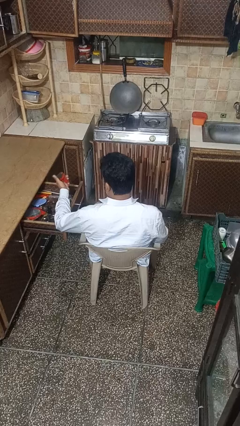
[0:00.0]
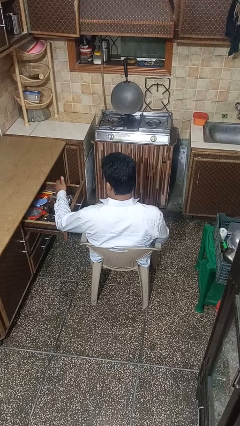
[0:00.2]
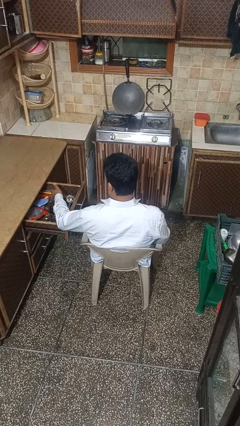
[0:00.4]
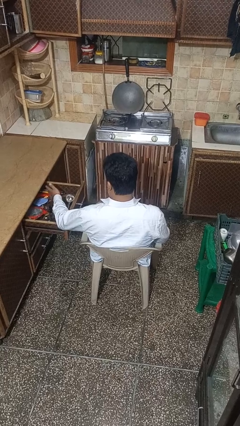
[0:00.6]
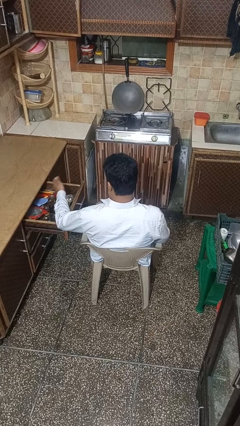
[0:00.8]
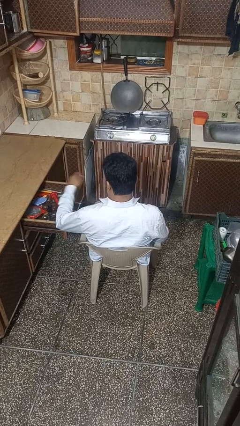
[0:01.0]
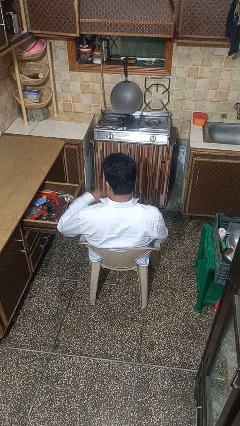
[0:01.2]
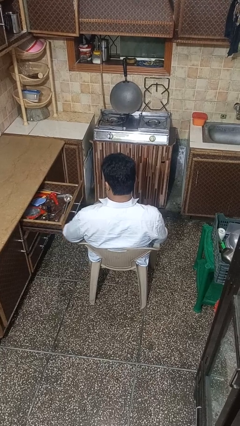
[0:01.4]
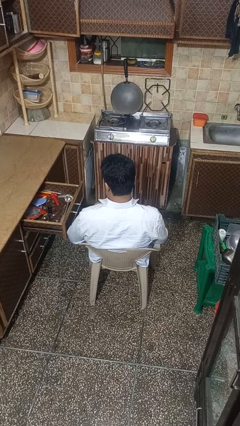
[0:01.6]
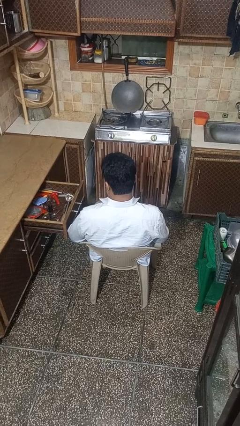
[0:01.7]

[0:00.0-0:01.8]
person puts object into kitchen drawer

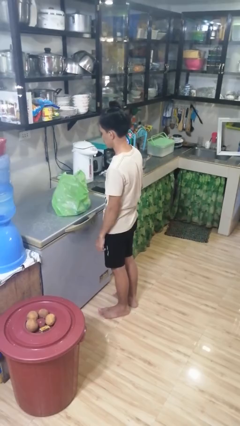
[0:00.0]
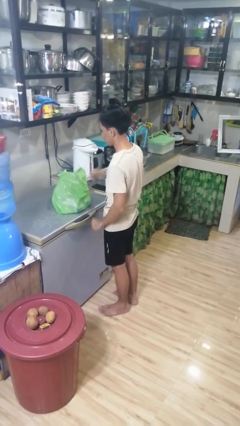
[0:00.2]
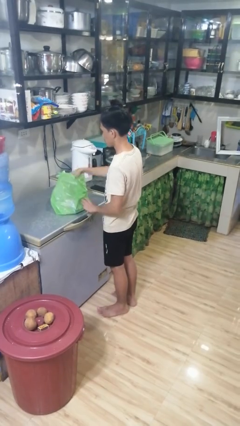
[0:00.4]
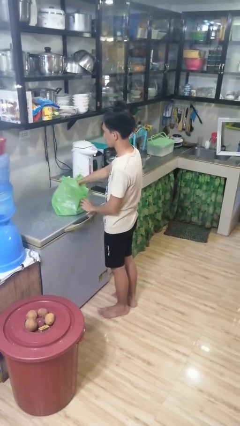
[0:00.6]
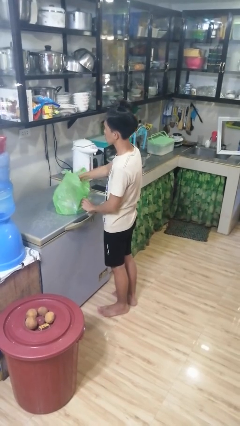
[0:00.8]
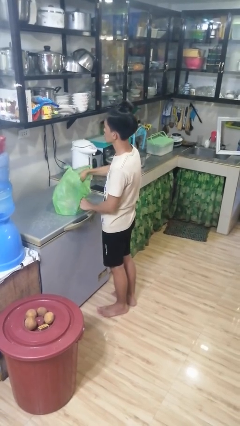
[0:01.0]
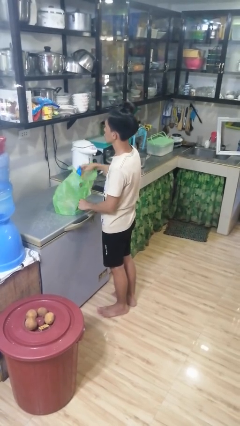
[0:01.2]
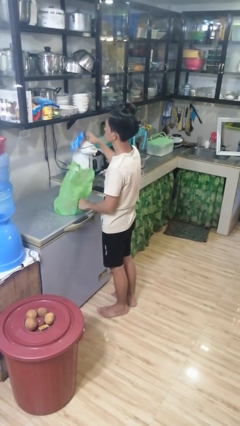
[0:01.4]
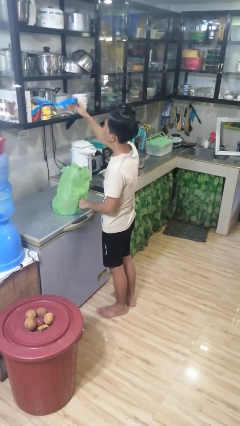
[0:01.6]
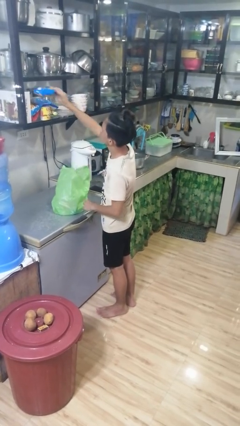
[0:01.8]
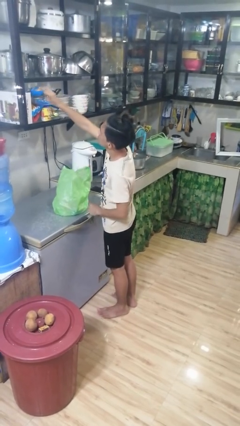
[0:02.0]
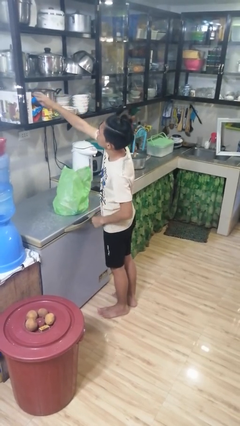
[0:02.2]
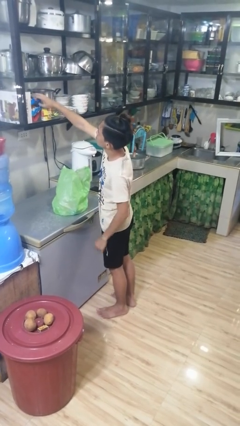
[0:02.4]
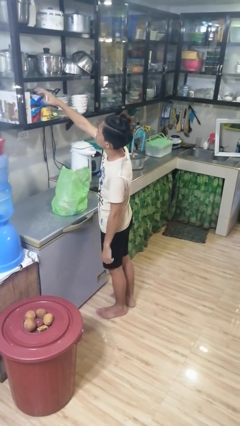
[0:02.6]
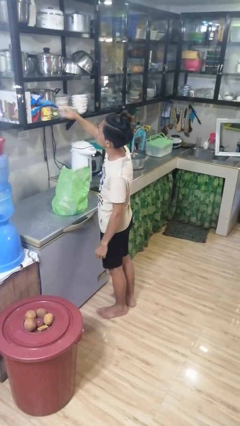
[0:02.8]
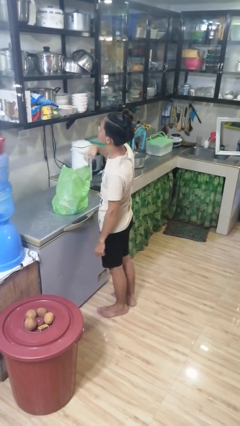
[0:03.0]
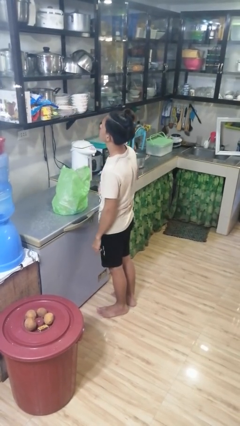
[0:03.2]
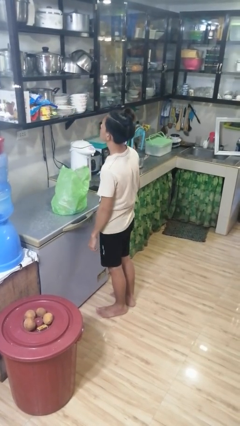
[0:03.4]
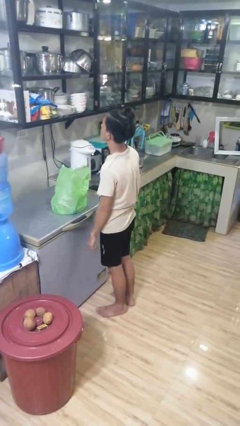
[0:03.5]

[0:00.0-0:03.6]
person loads groceries into cabinet

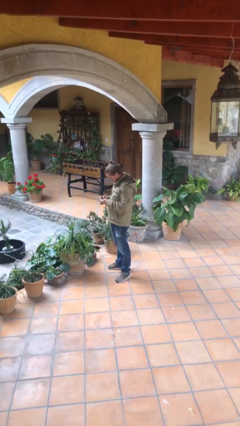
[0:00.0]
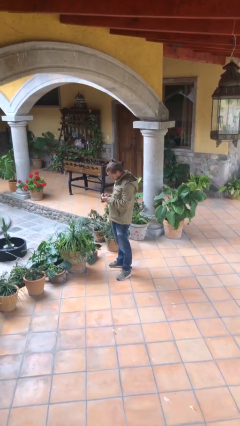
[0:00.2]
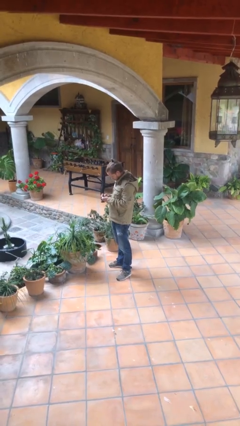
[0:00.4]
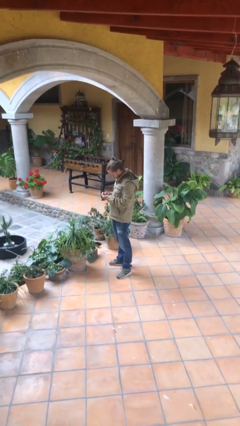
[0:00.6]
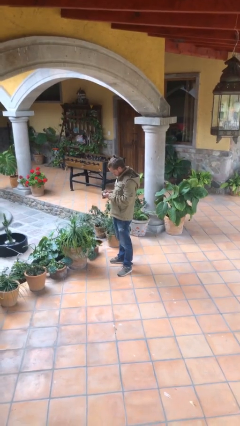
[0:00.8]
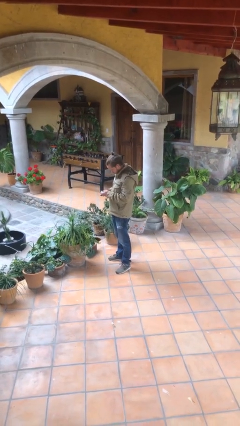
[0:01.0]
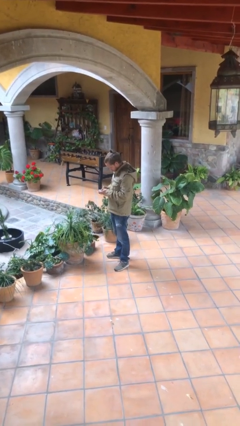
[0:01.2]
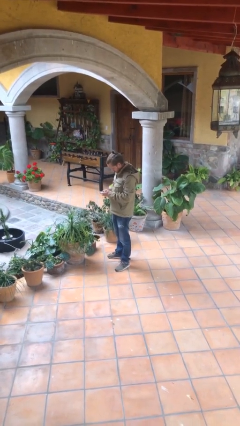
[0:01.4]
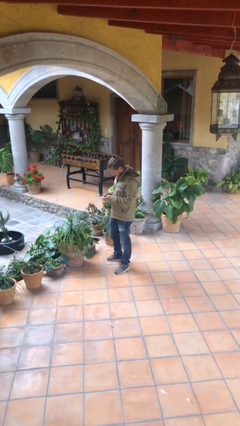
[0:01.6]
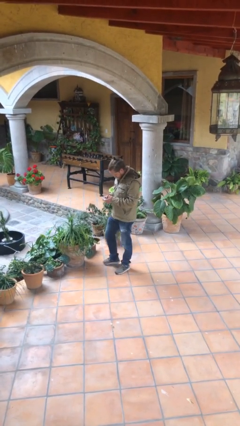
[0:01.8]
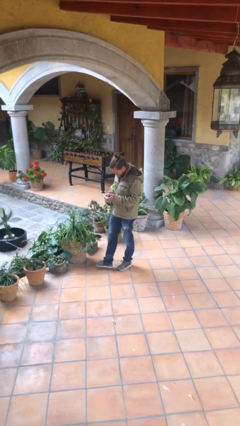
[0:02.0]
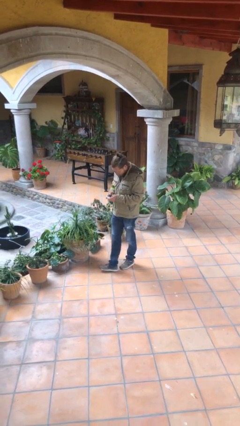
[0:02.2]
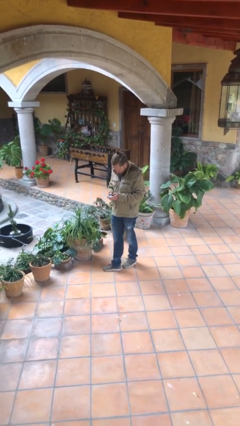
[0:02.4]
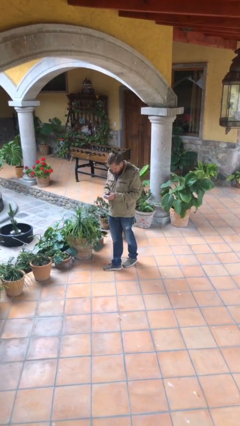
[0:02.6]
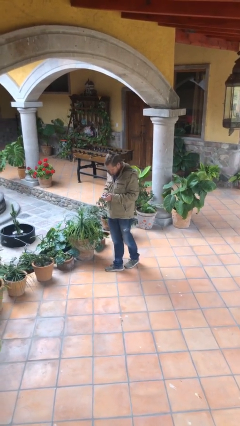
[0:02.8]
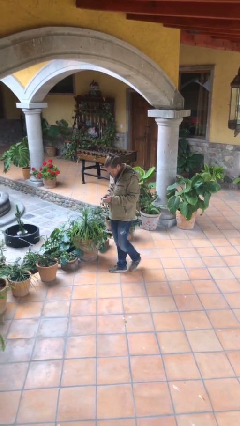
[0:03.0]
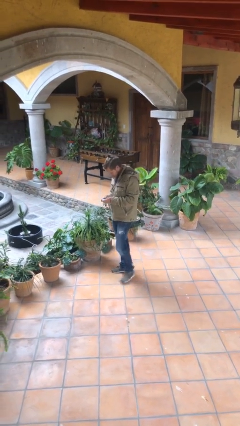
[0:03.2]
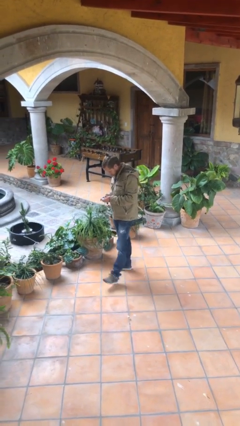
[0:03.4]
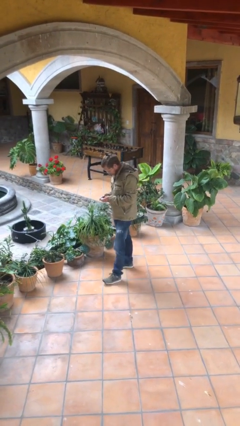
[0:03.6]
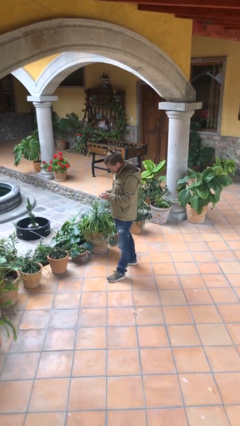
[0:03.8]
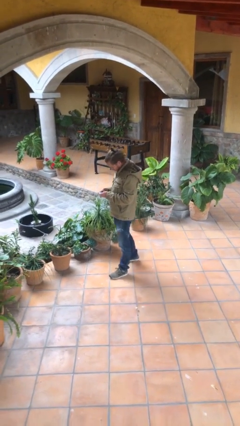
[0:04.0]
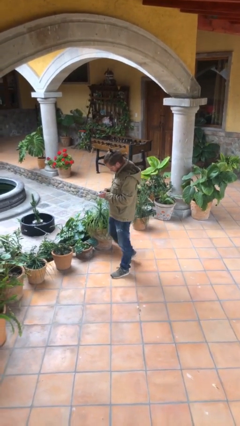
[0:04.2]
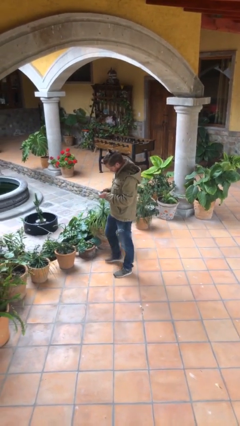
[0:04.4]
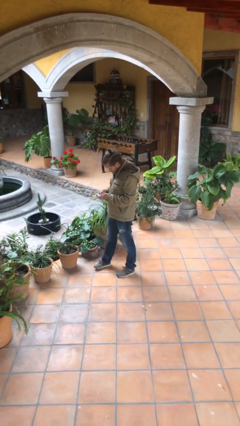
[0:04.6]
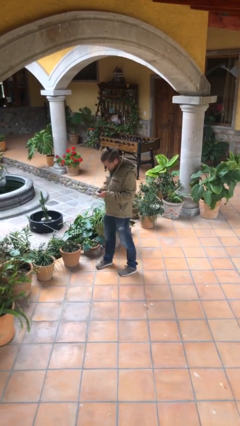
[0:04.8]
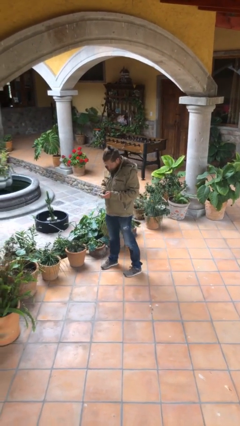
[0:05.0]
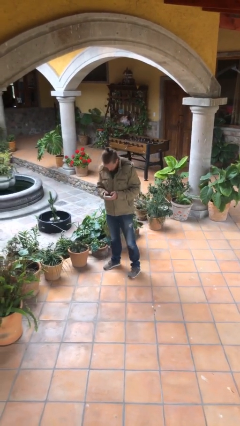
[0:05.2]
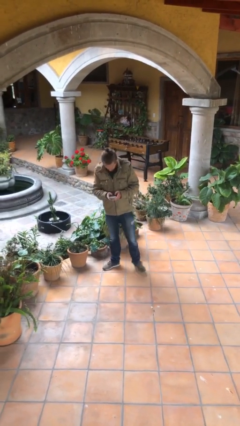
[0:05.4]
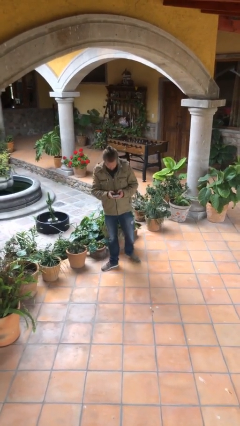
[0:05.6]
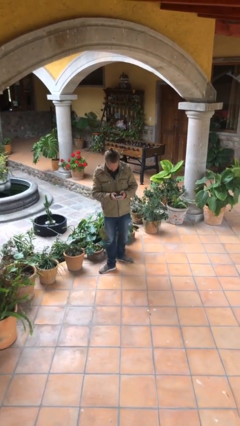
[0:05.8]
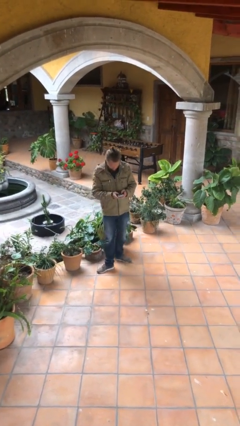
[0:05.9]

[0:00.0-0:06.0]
person texts on phone

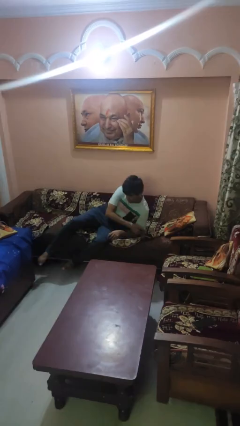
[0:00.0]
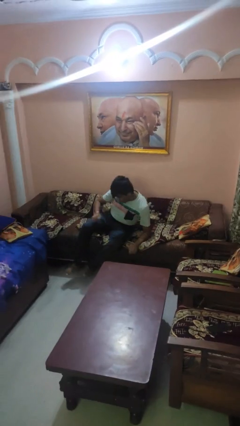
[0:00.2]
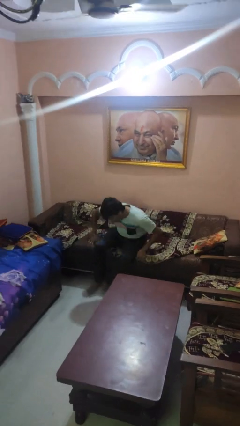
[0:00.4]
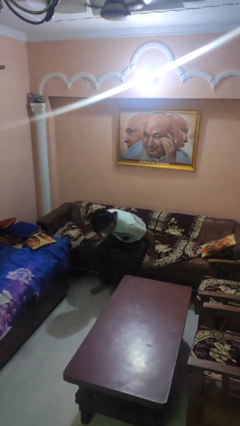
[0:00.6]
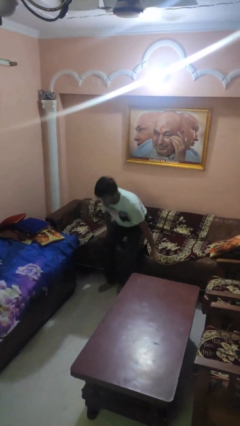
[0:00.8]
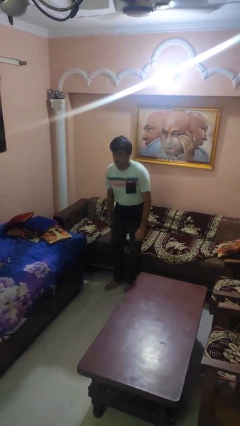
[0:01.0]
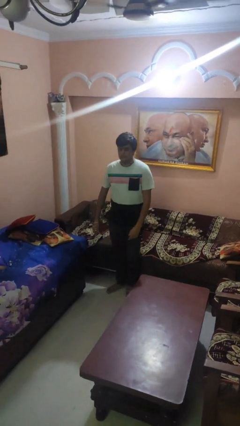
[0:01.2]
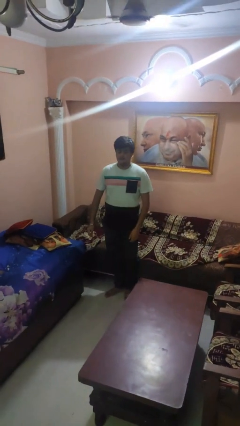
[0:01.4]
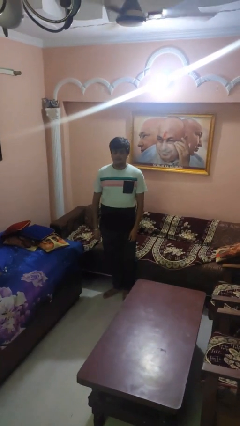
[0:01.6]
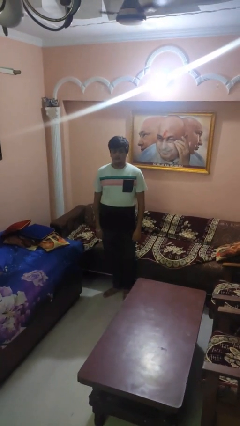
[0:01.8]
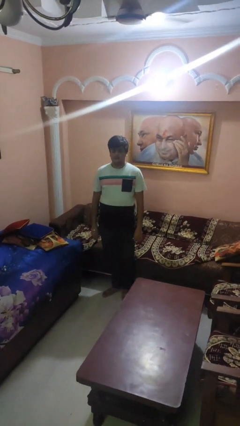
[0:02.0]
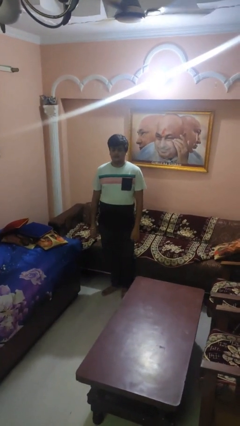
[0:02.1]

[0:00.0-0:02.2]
person stands up

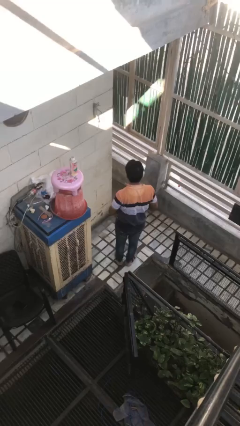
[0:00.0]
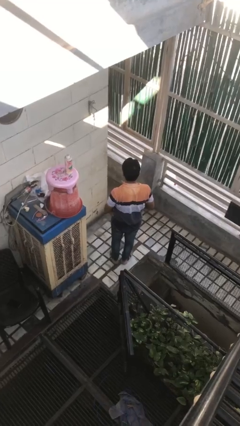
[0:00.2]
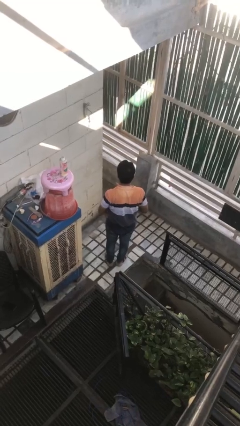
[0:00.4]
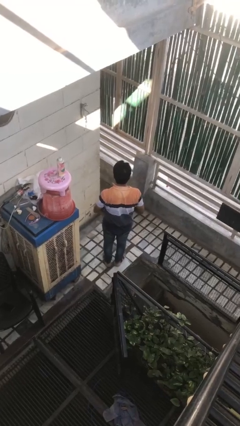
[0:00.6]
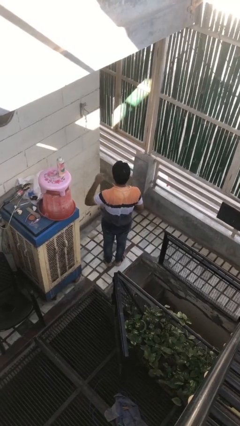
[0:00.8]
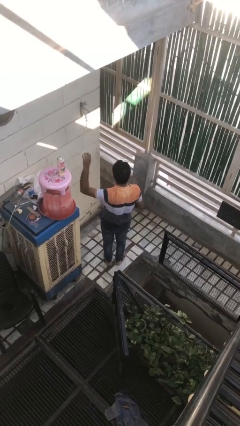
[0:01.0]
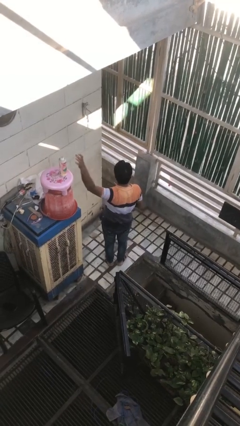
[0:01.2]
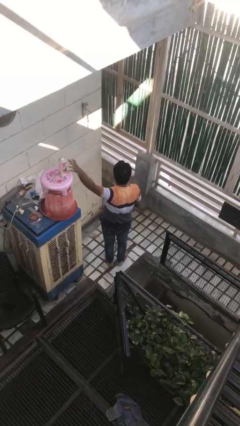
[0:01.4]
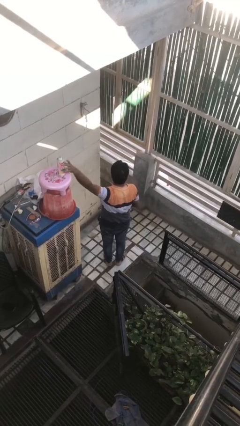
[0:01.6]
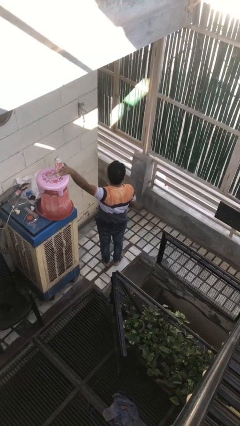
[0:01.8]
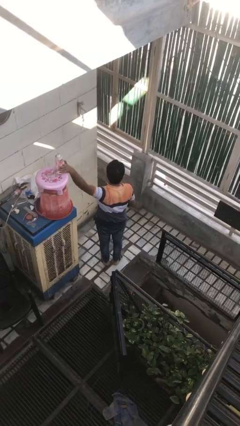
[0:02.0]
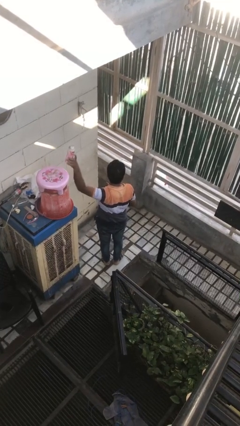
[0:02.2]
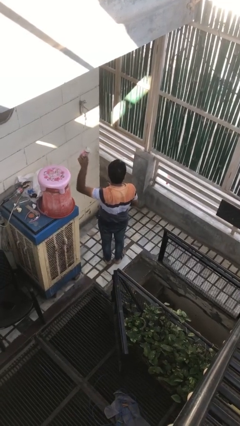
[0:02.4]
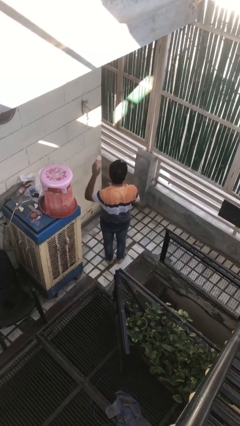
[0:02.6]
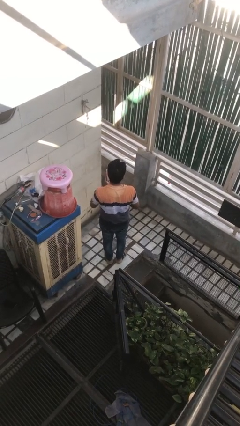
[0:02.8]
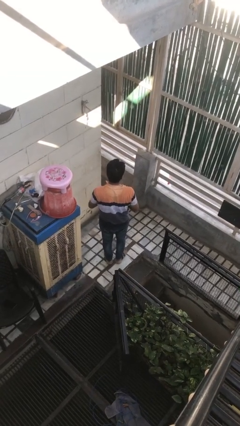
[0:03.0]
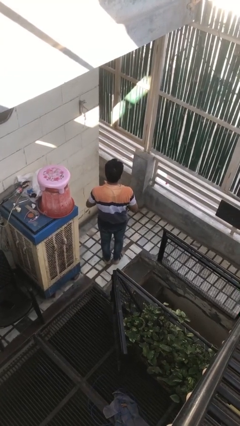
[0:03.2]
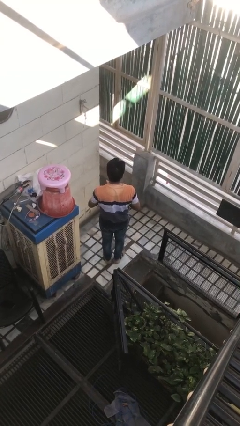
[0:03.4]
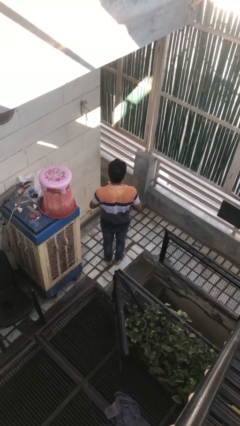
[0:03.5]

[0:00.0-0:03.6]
person picks up object from countertop

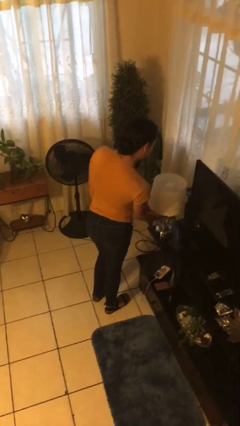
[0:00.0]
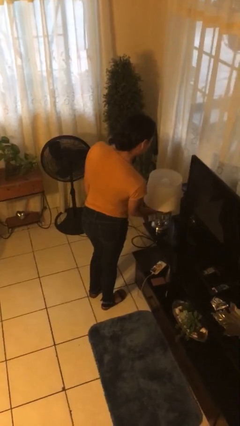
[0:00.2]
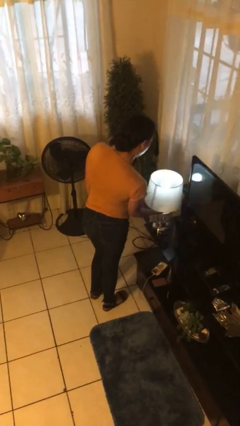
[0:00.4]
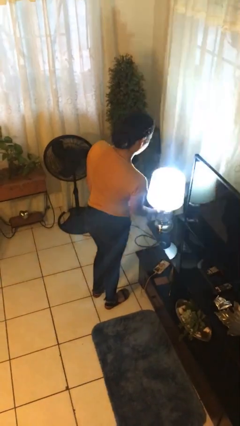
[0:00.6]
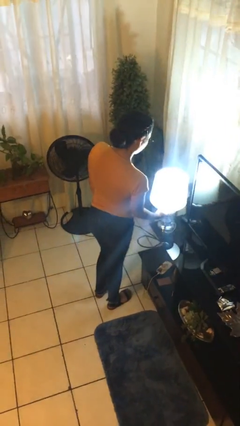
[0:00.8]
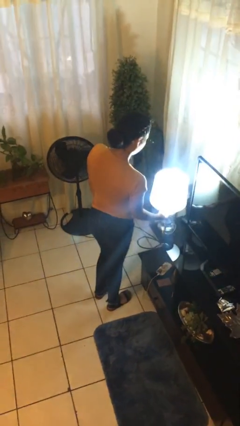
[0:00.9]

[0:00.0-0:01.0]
person turns on lamp
